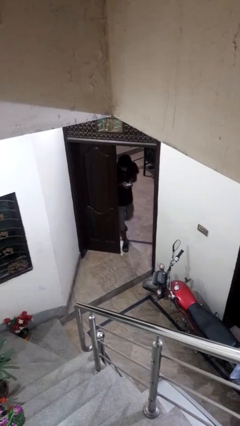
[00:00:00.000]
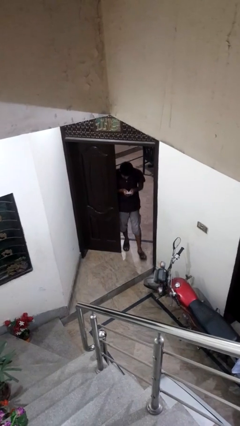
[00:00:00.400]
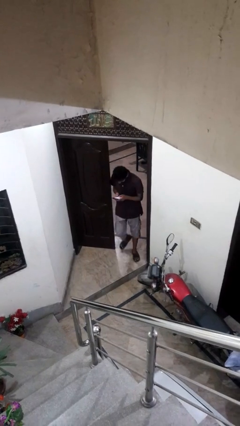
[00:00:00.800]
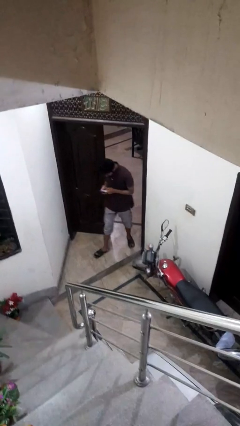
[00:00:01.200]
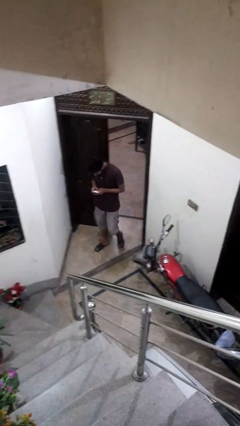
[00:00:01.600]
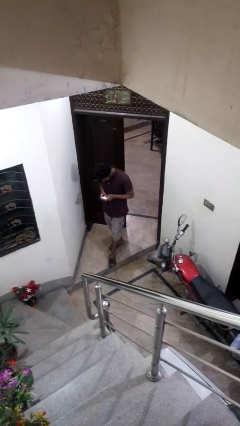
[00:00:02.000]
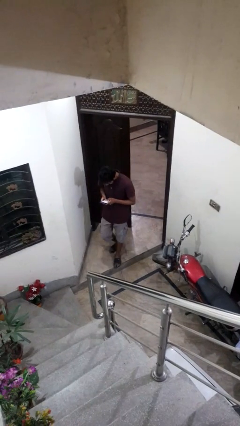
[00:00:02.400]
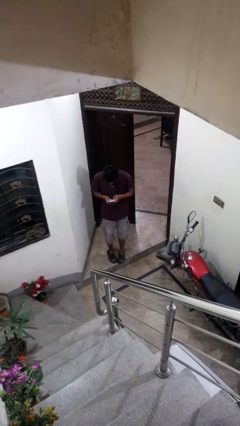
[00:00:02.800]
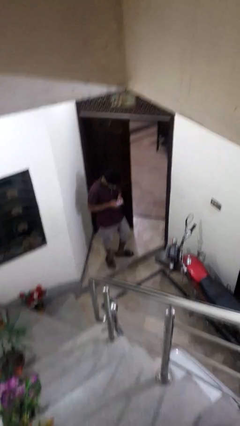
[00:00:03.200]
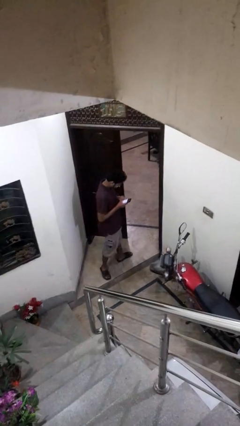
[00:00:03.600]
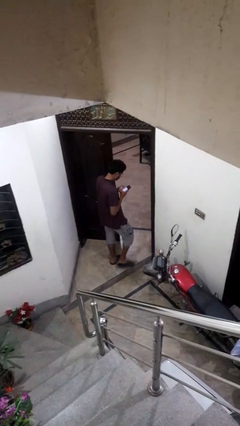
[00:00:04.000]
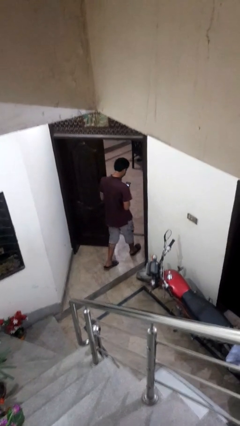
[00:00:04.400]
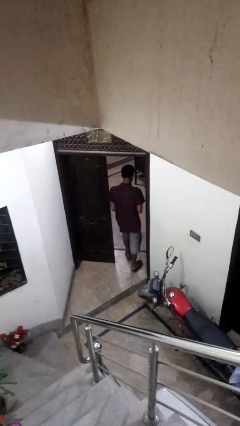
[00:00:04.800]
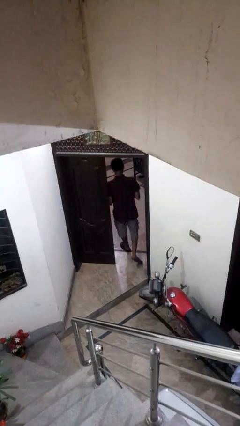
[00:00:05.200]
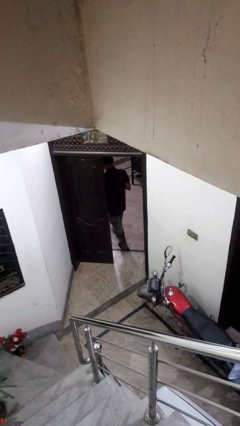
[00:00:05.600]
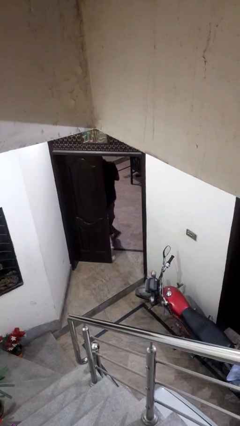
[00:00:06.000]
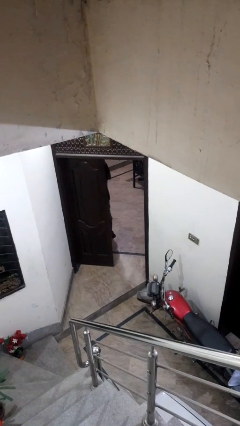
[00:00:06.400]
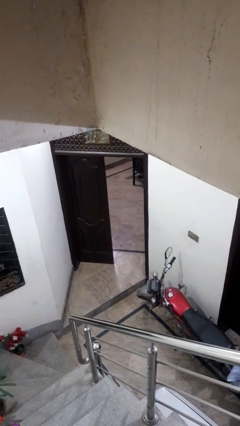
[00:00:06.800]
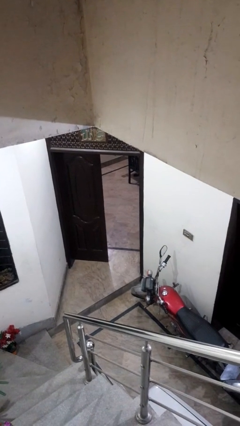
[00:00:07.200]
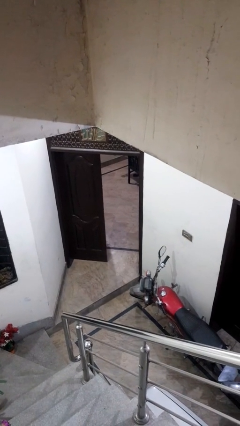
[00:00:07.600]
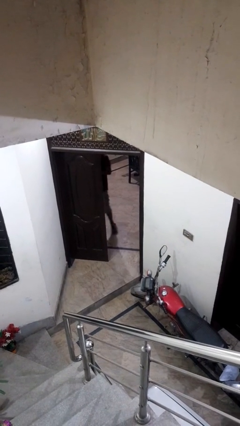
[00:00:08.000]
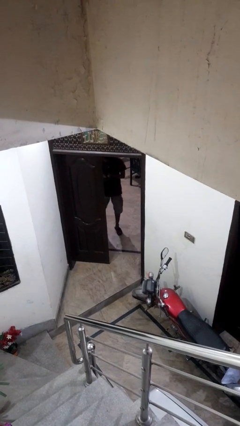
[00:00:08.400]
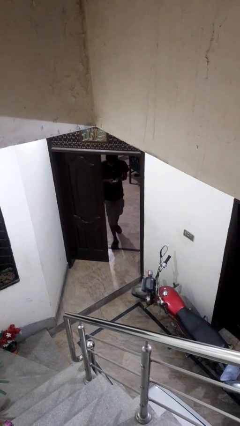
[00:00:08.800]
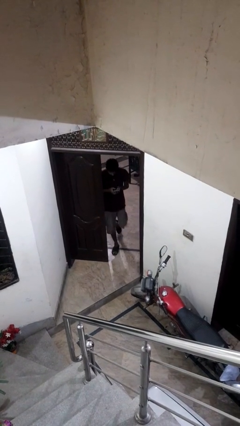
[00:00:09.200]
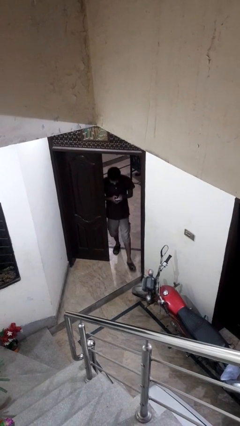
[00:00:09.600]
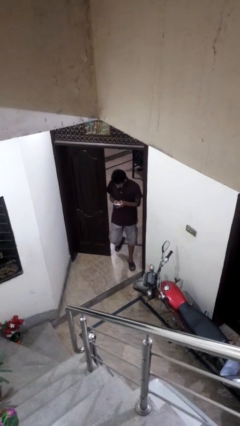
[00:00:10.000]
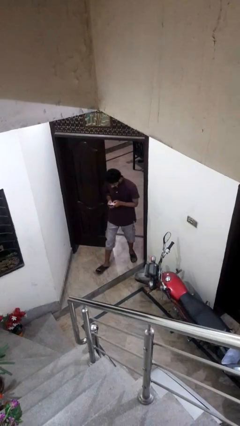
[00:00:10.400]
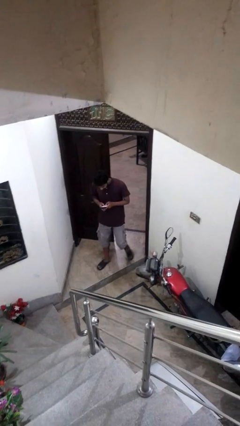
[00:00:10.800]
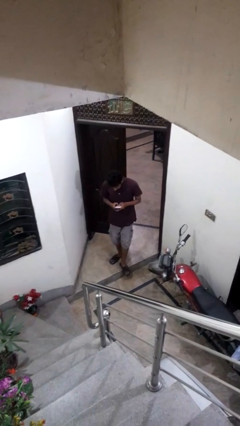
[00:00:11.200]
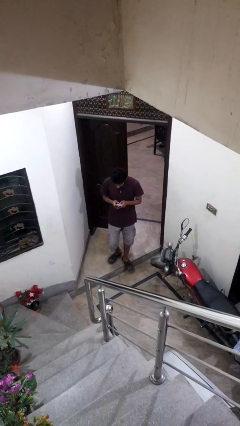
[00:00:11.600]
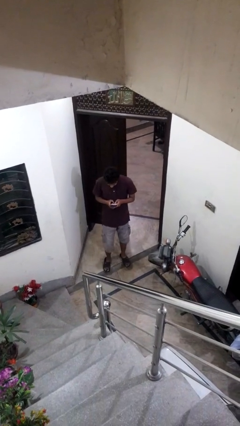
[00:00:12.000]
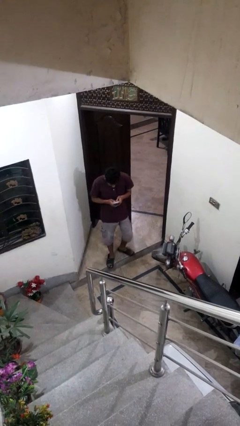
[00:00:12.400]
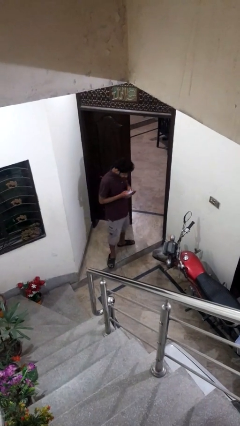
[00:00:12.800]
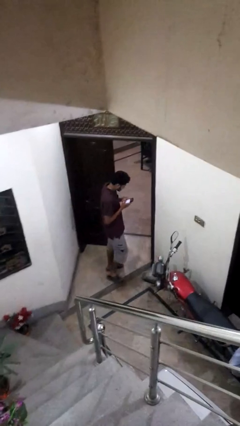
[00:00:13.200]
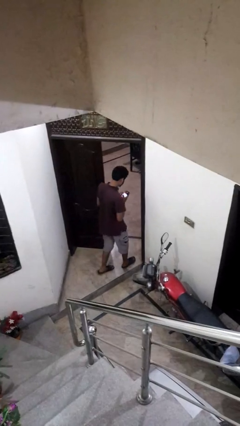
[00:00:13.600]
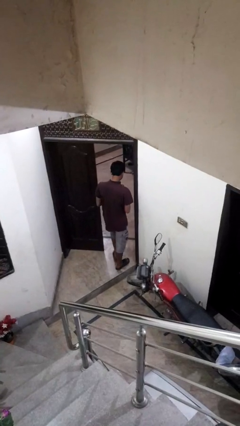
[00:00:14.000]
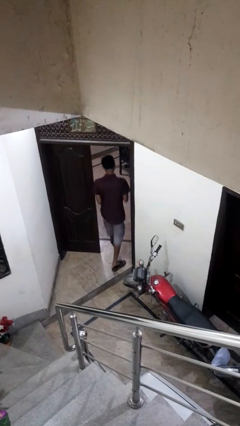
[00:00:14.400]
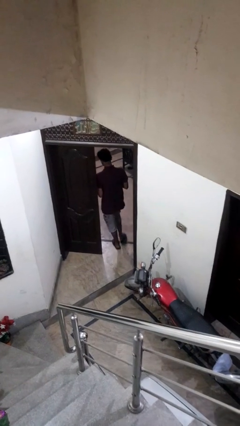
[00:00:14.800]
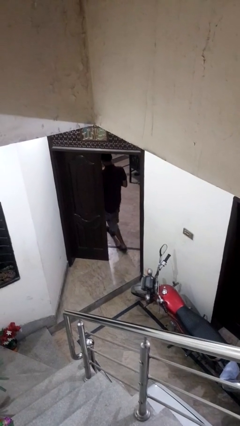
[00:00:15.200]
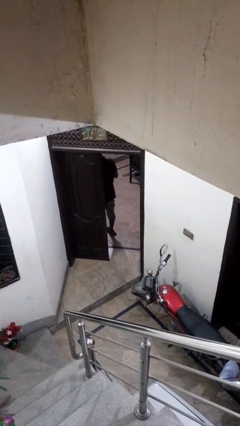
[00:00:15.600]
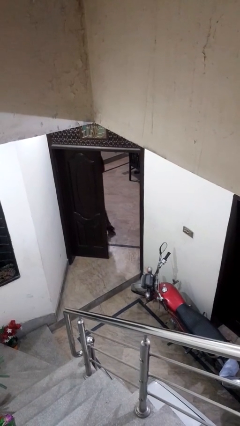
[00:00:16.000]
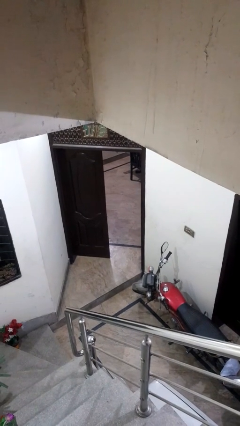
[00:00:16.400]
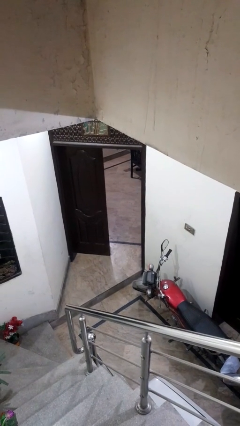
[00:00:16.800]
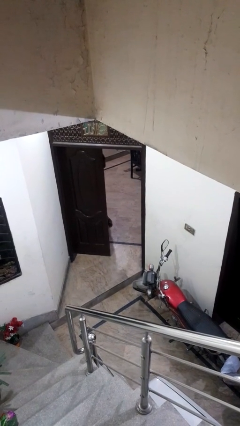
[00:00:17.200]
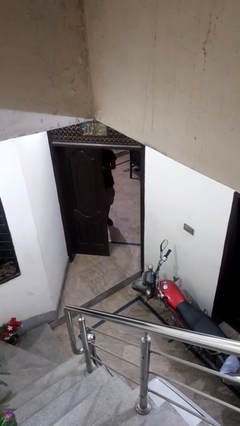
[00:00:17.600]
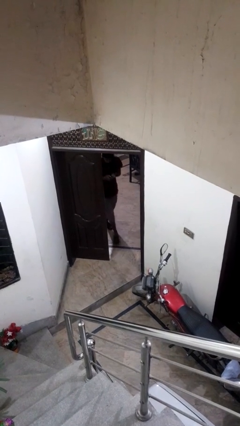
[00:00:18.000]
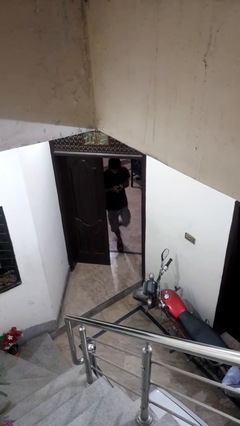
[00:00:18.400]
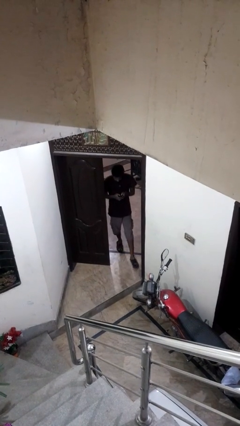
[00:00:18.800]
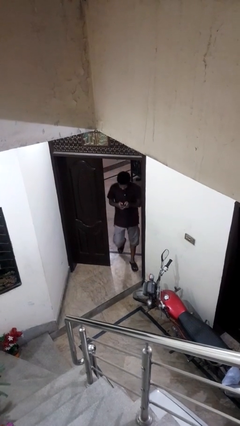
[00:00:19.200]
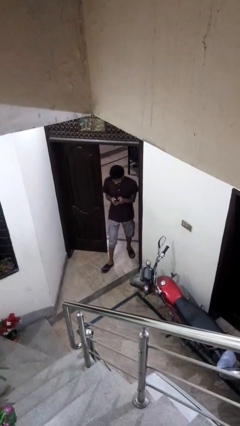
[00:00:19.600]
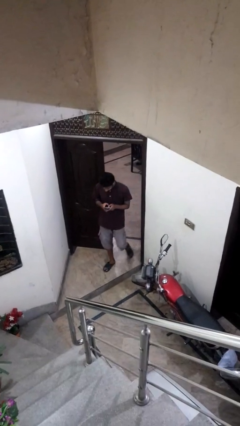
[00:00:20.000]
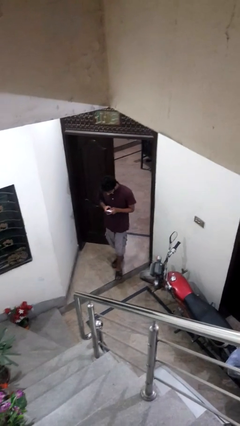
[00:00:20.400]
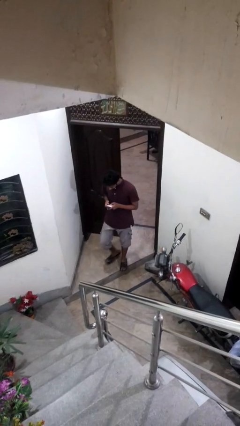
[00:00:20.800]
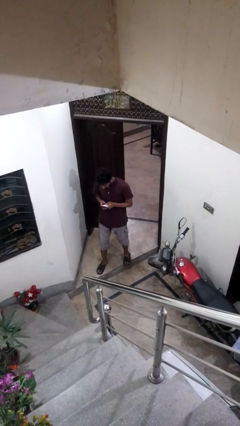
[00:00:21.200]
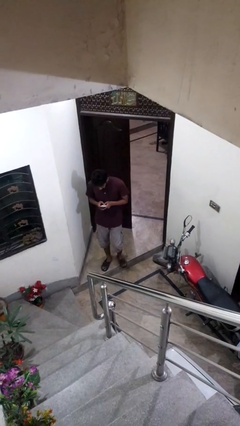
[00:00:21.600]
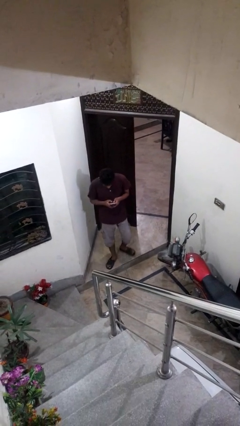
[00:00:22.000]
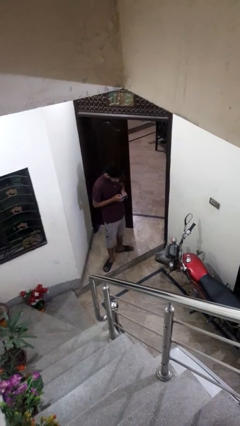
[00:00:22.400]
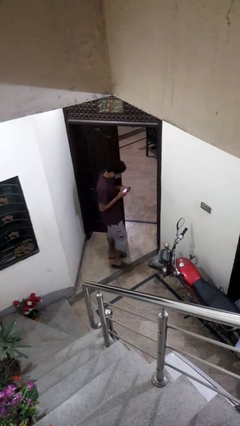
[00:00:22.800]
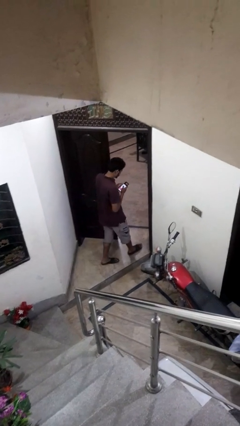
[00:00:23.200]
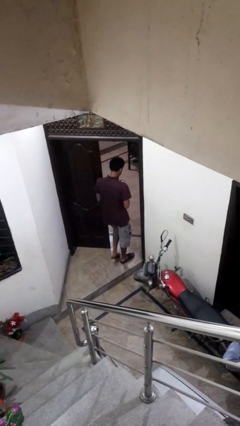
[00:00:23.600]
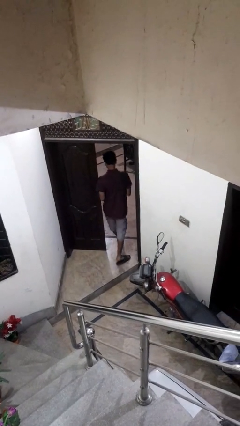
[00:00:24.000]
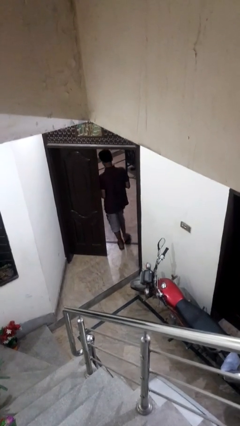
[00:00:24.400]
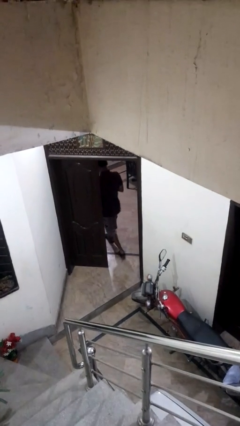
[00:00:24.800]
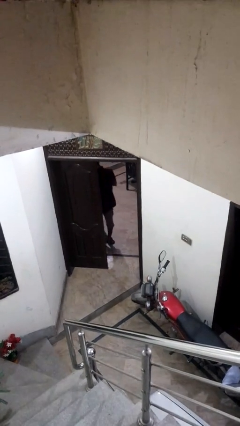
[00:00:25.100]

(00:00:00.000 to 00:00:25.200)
person texts on phone

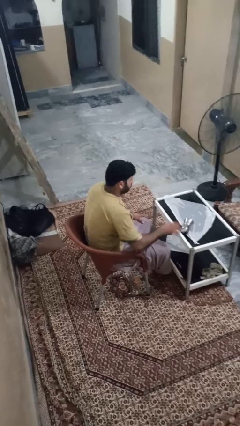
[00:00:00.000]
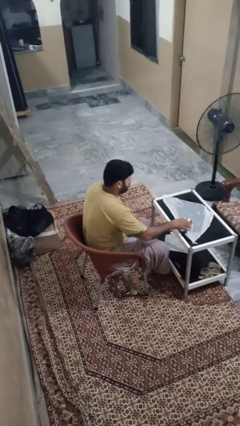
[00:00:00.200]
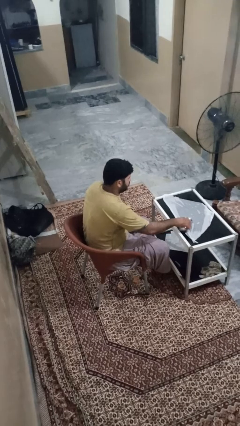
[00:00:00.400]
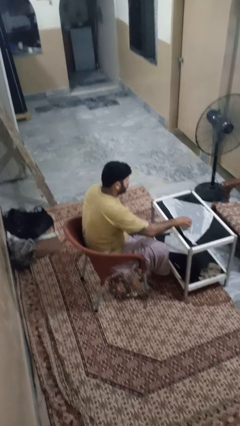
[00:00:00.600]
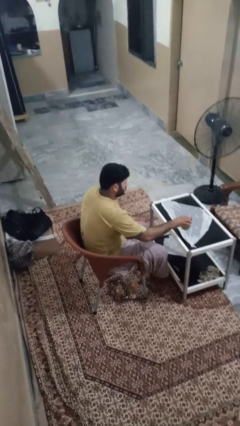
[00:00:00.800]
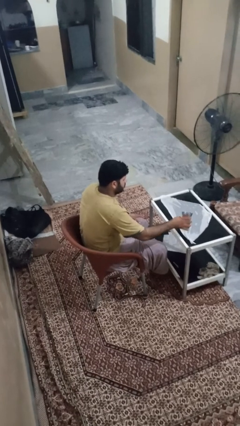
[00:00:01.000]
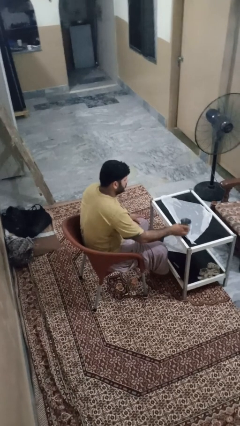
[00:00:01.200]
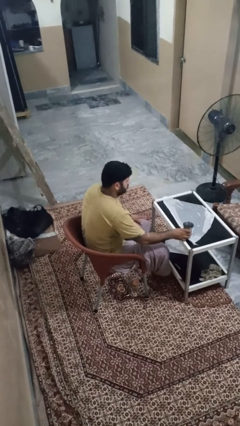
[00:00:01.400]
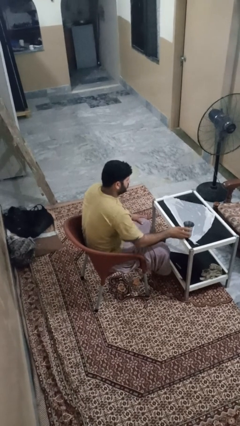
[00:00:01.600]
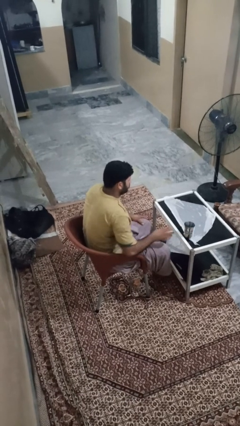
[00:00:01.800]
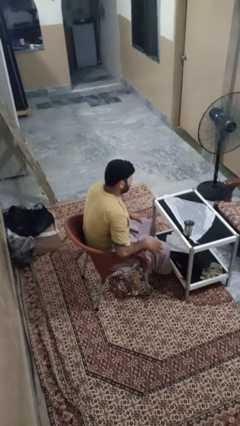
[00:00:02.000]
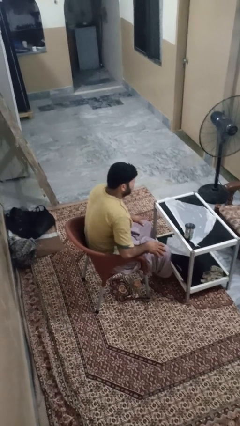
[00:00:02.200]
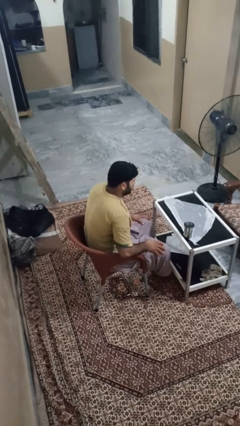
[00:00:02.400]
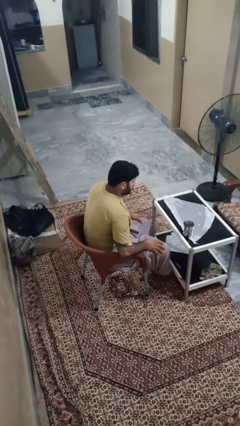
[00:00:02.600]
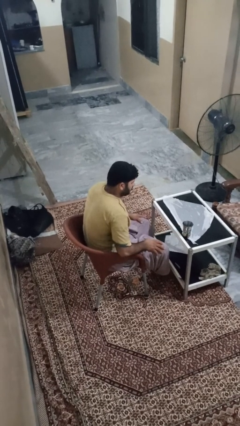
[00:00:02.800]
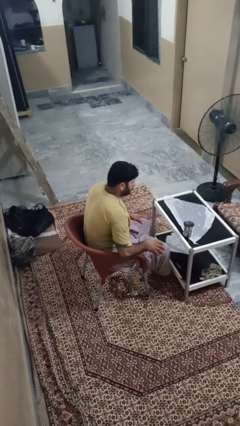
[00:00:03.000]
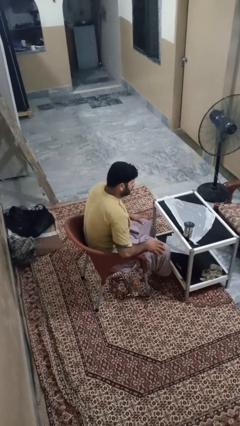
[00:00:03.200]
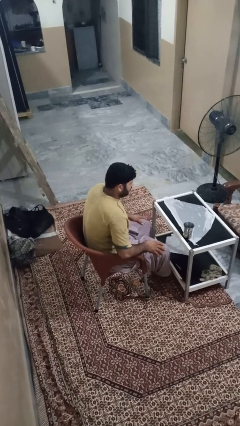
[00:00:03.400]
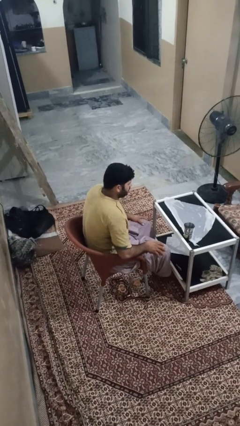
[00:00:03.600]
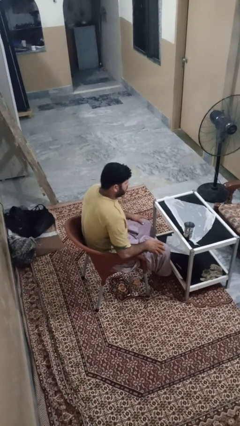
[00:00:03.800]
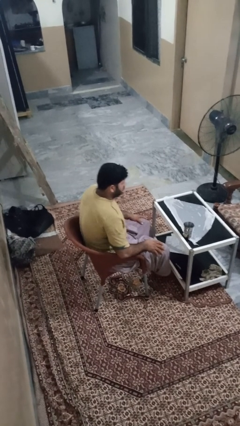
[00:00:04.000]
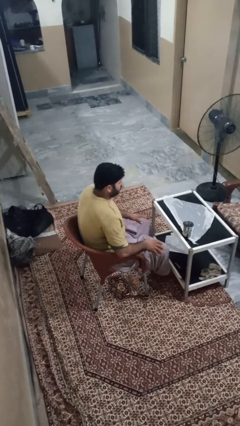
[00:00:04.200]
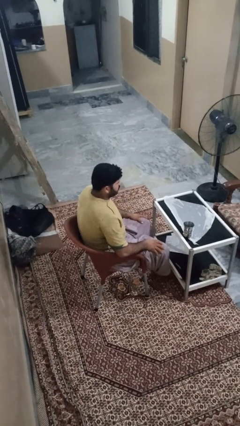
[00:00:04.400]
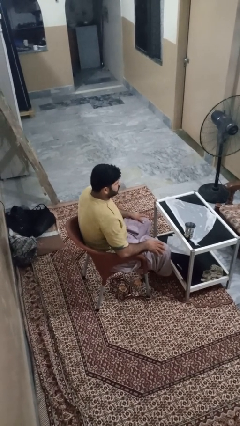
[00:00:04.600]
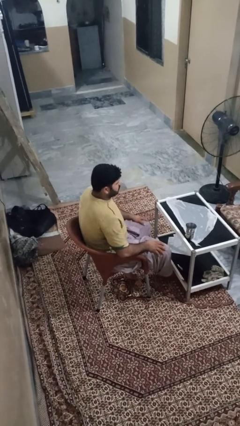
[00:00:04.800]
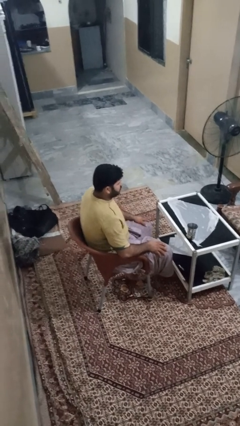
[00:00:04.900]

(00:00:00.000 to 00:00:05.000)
person sets upright glass

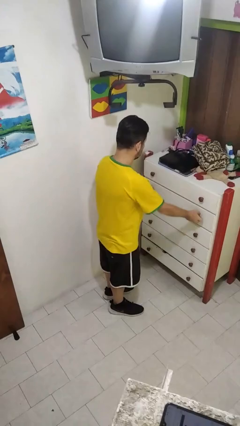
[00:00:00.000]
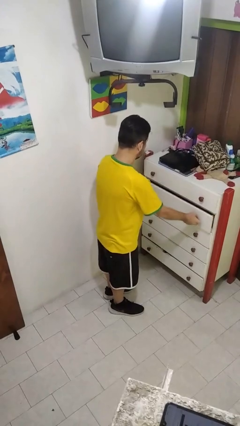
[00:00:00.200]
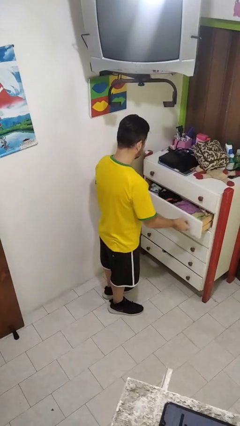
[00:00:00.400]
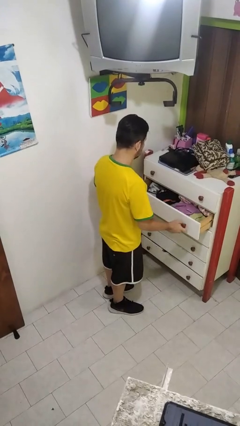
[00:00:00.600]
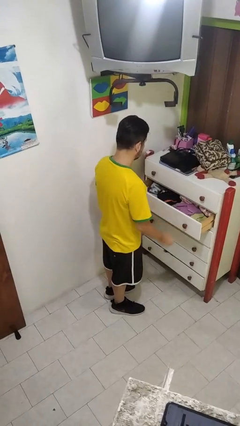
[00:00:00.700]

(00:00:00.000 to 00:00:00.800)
person opens dresser drawer
